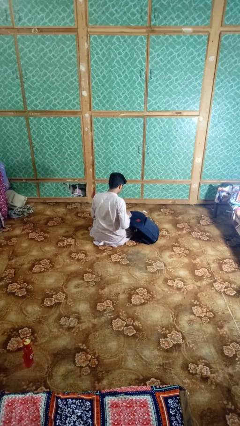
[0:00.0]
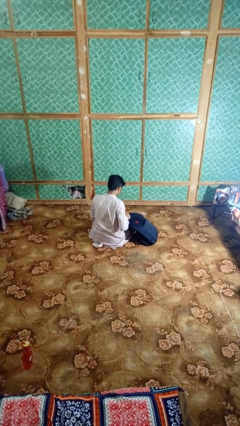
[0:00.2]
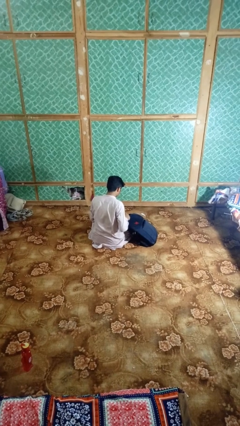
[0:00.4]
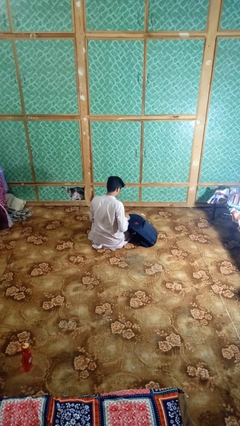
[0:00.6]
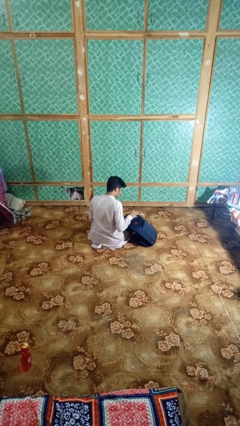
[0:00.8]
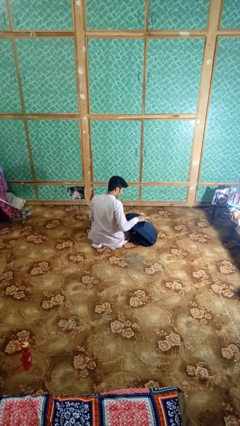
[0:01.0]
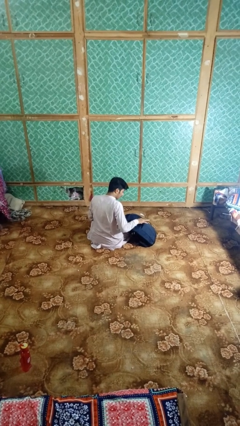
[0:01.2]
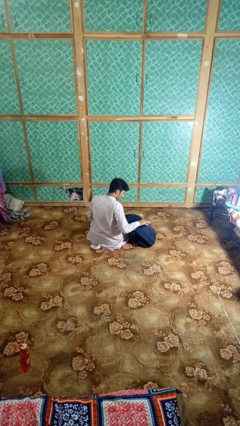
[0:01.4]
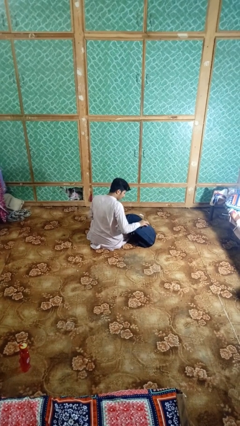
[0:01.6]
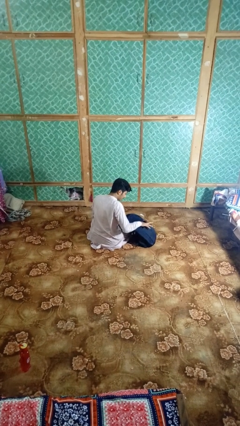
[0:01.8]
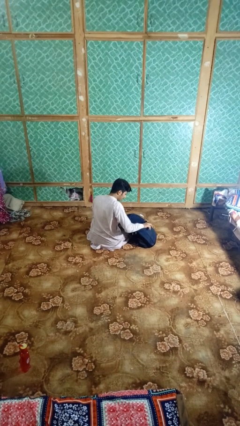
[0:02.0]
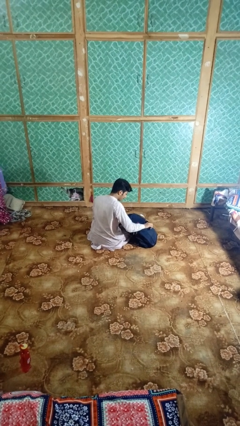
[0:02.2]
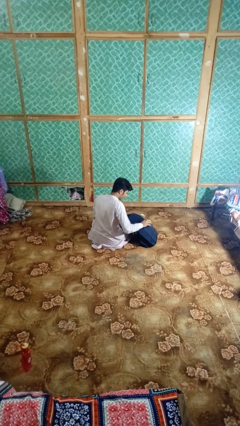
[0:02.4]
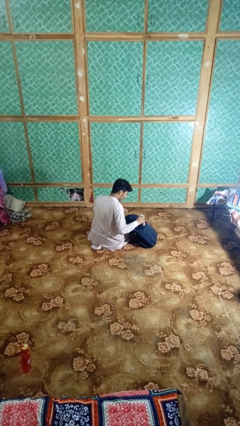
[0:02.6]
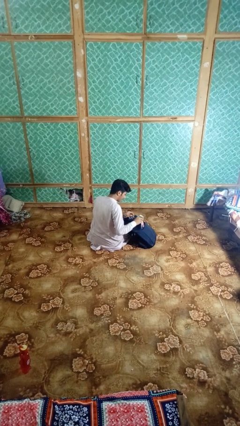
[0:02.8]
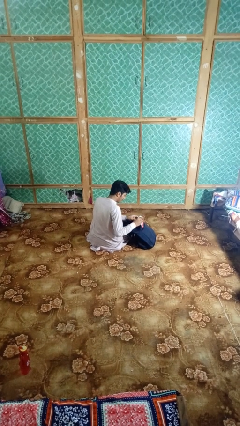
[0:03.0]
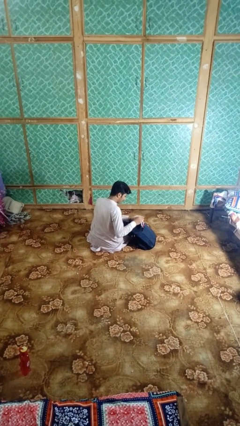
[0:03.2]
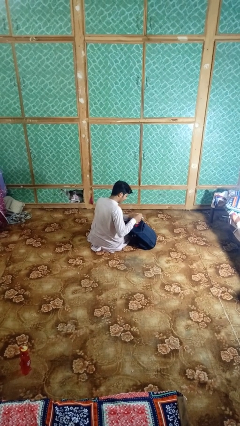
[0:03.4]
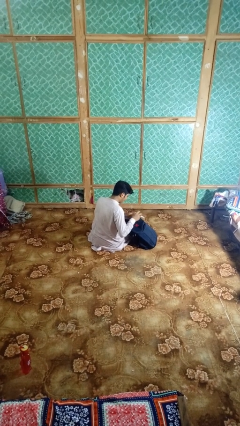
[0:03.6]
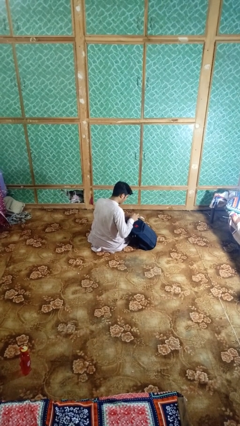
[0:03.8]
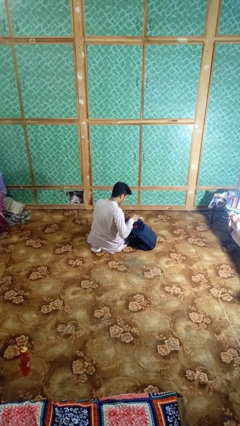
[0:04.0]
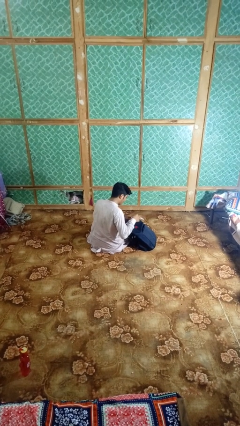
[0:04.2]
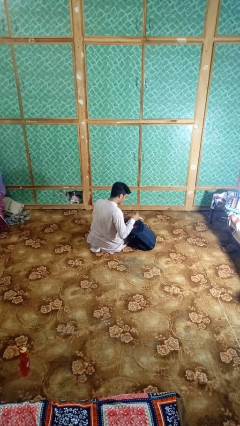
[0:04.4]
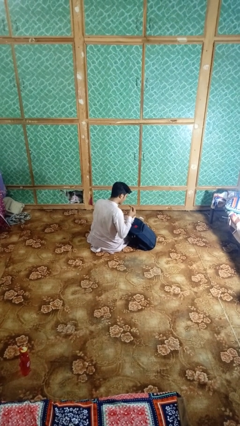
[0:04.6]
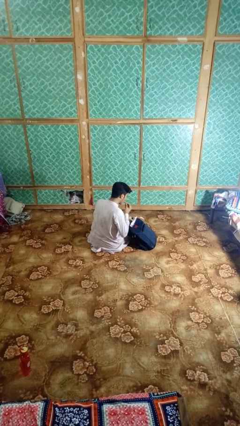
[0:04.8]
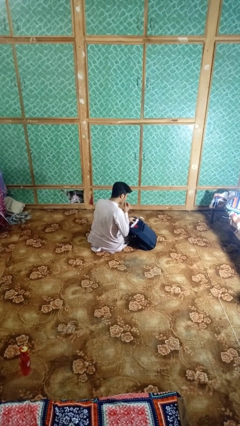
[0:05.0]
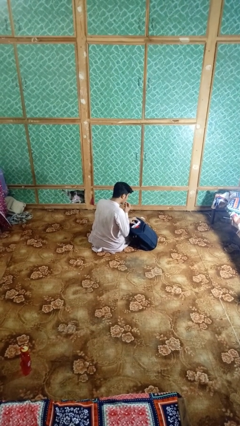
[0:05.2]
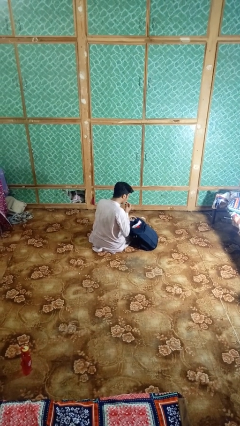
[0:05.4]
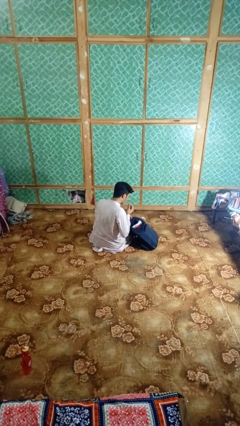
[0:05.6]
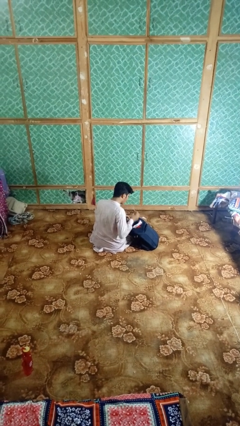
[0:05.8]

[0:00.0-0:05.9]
person eats snack from bag

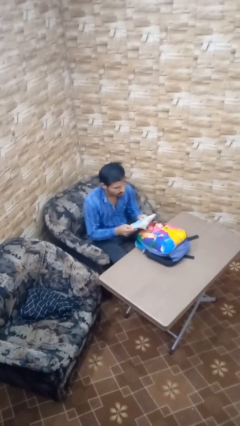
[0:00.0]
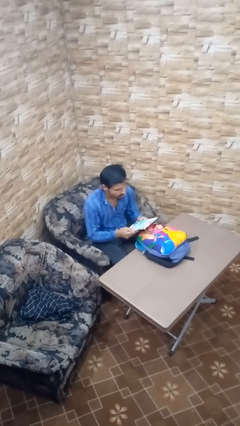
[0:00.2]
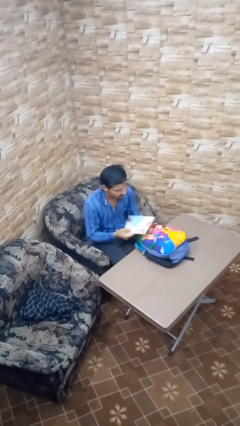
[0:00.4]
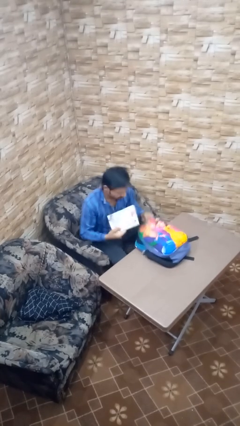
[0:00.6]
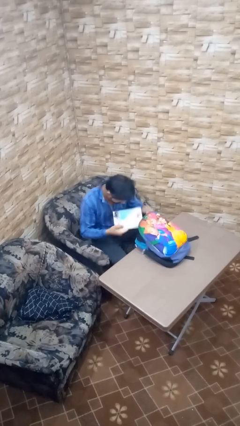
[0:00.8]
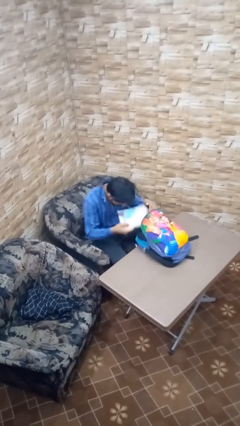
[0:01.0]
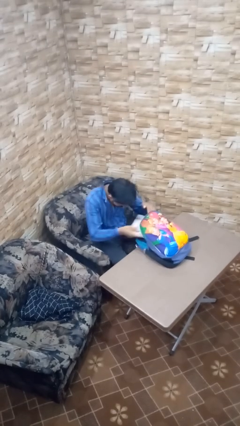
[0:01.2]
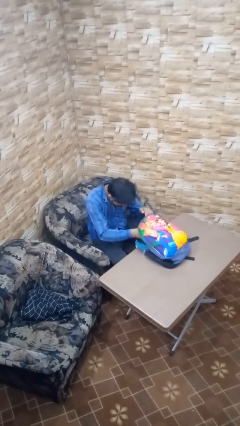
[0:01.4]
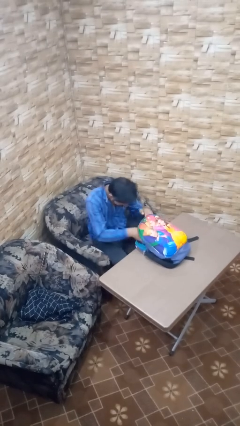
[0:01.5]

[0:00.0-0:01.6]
person puts object into backpack

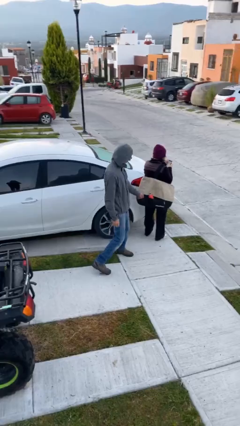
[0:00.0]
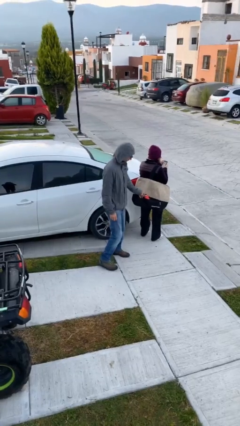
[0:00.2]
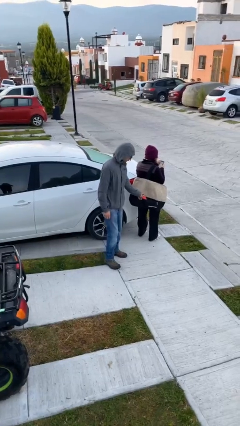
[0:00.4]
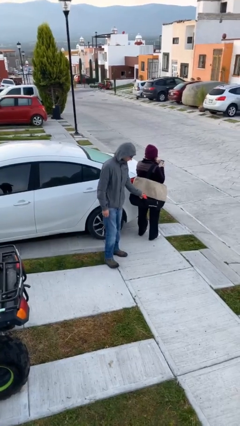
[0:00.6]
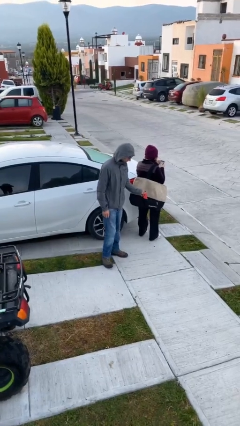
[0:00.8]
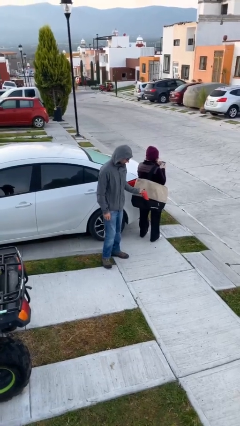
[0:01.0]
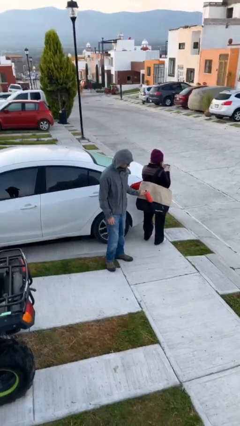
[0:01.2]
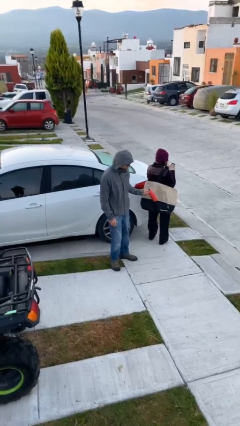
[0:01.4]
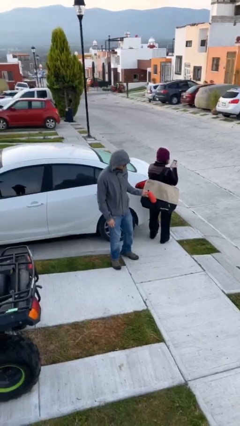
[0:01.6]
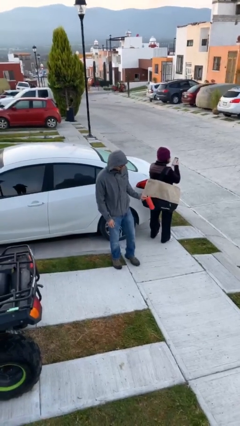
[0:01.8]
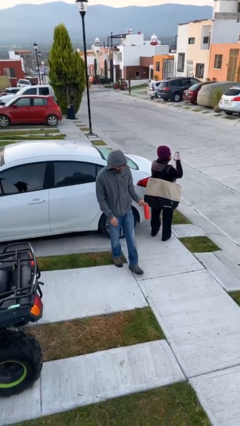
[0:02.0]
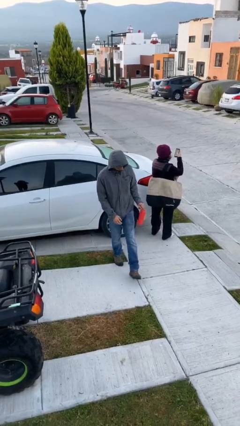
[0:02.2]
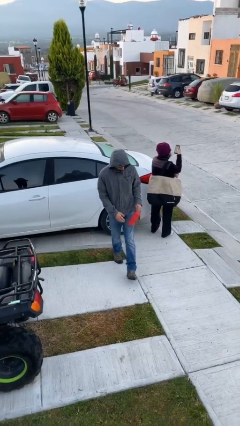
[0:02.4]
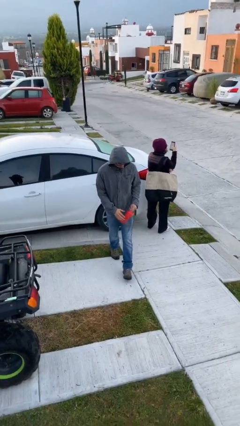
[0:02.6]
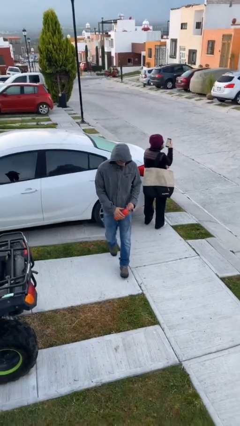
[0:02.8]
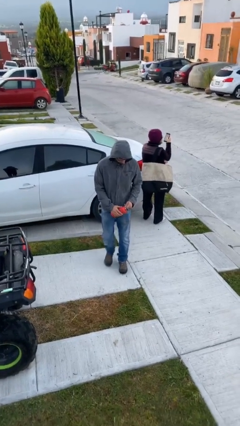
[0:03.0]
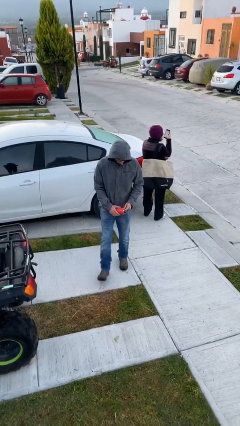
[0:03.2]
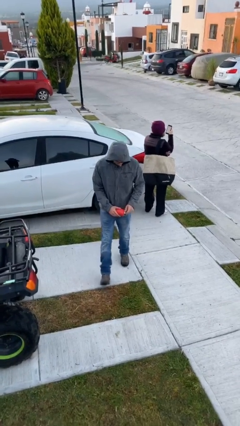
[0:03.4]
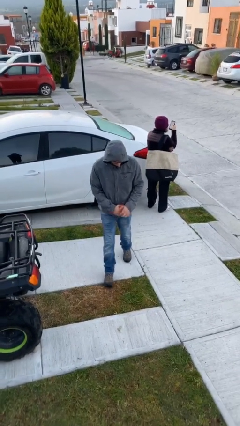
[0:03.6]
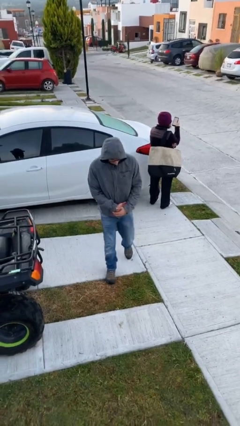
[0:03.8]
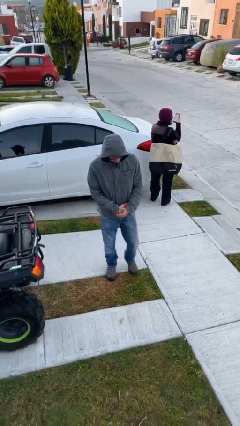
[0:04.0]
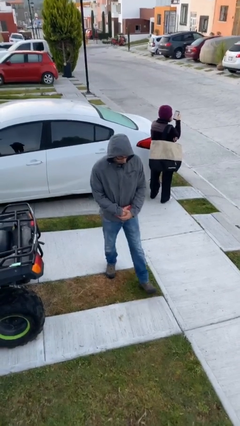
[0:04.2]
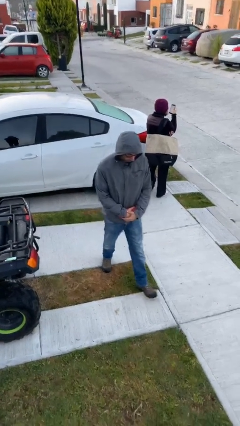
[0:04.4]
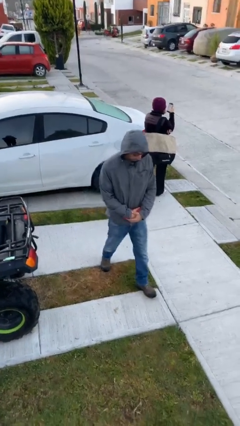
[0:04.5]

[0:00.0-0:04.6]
person steals object from person

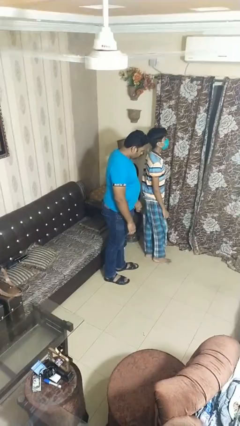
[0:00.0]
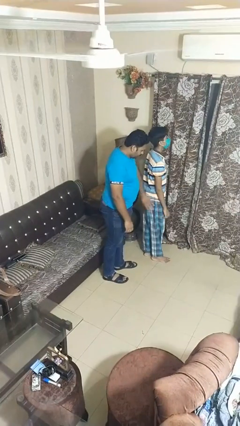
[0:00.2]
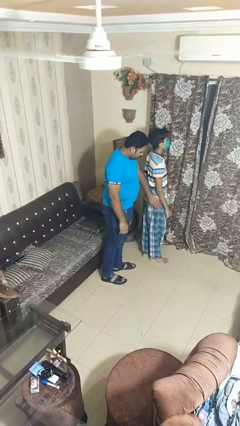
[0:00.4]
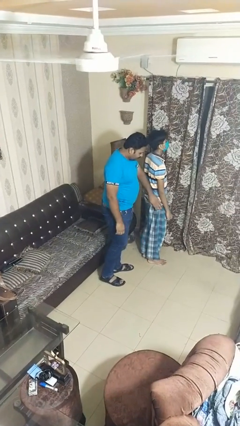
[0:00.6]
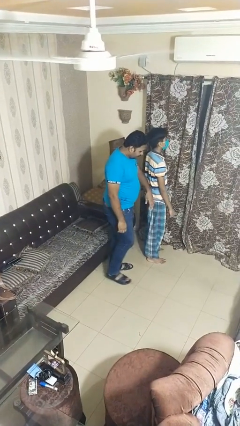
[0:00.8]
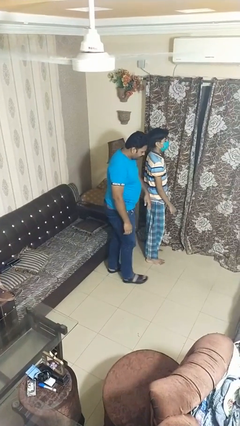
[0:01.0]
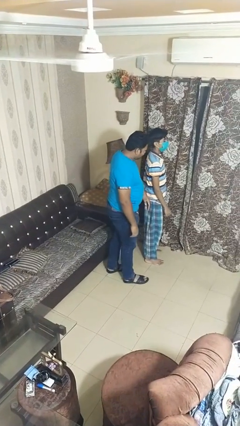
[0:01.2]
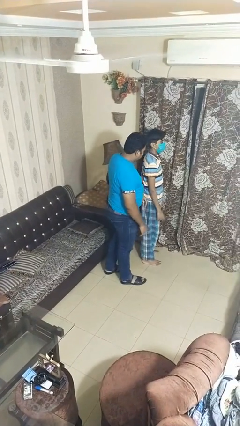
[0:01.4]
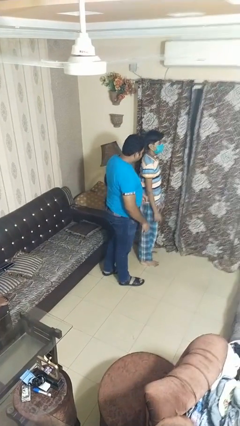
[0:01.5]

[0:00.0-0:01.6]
person bumps into person

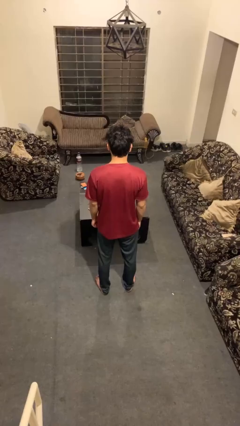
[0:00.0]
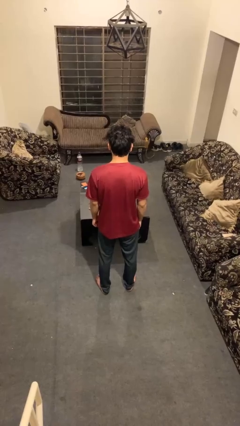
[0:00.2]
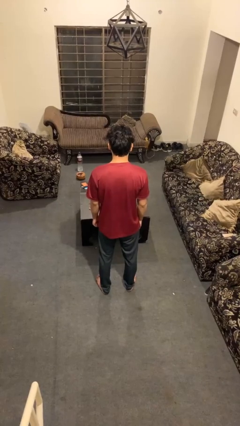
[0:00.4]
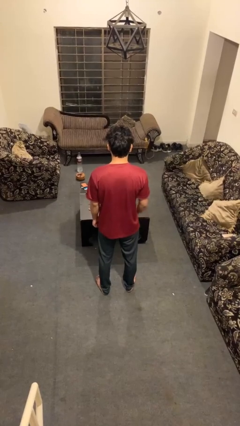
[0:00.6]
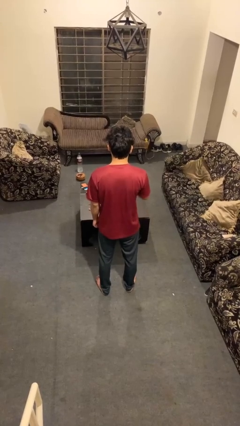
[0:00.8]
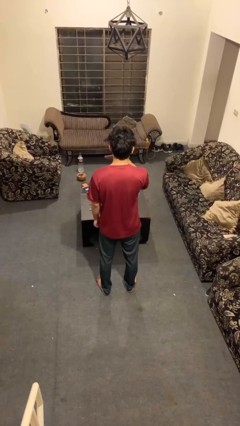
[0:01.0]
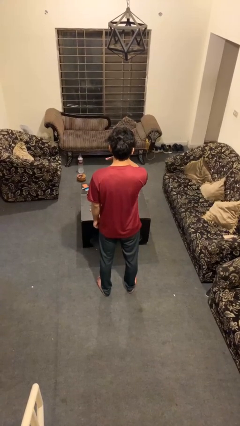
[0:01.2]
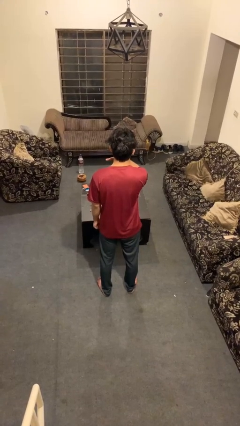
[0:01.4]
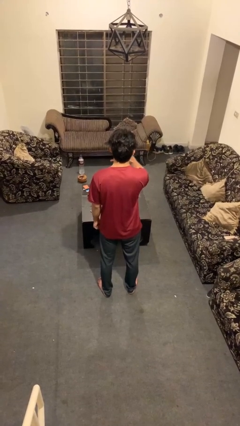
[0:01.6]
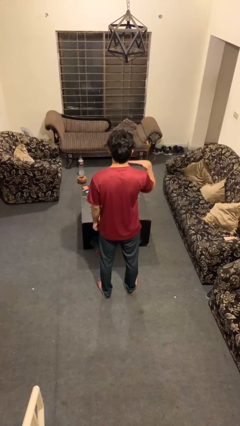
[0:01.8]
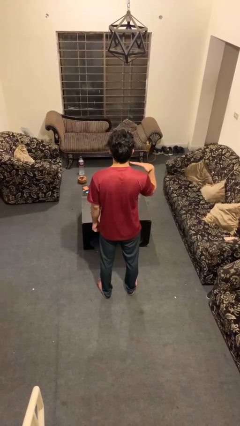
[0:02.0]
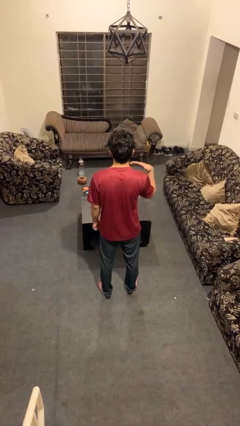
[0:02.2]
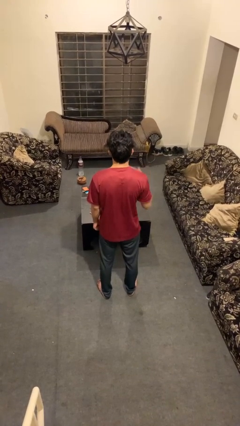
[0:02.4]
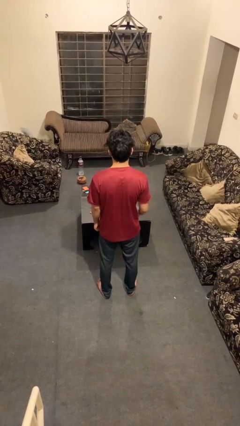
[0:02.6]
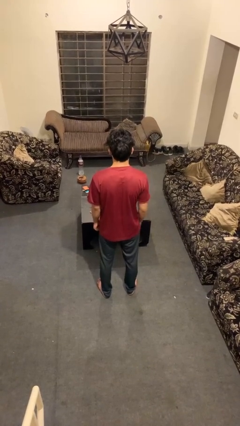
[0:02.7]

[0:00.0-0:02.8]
person gestures cut

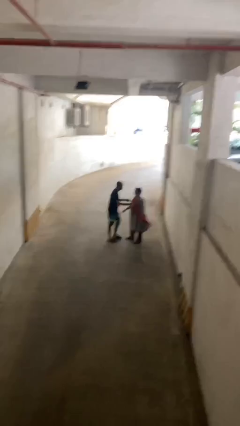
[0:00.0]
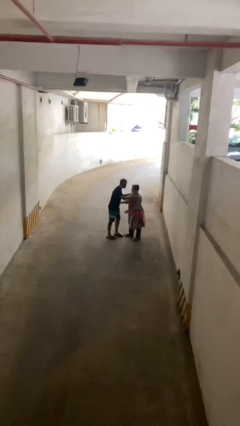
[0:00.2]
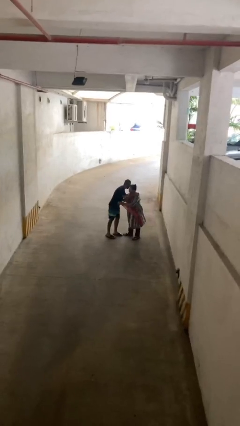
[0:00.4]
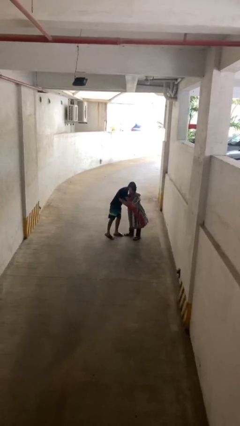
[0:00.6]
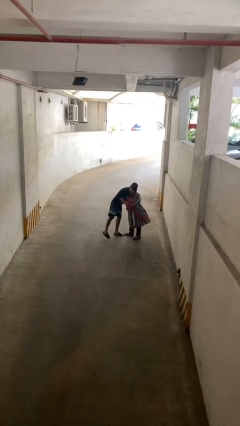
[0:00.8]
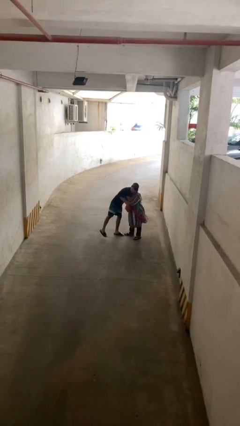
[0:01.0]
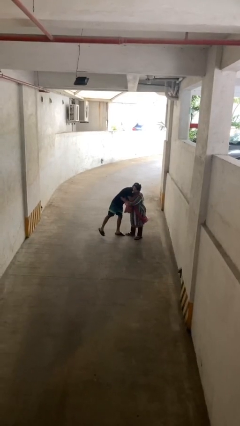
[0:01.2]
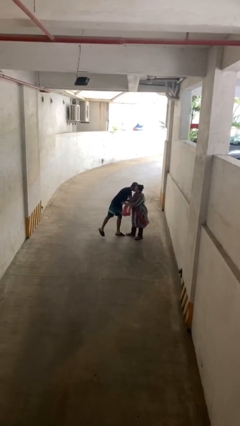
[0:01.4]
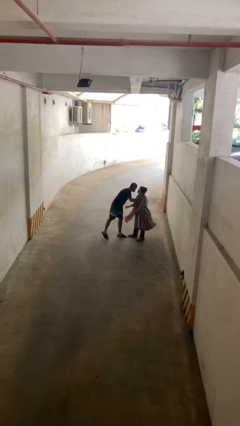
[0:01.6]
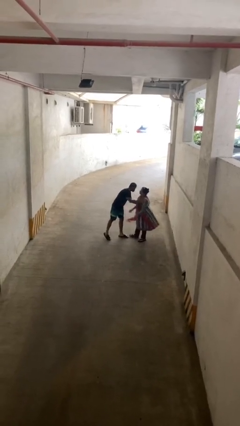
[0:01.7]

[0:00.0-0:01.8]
person embraces person
